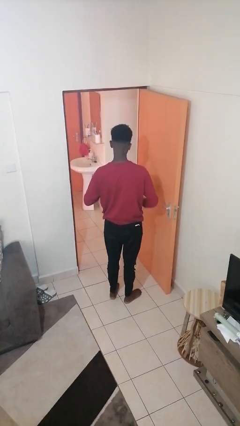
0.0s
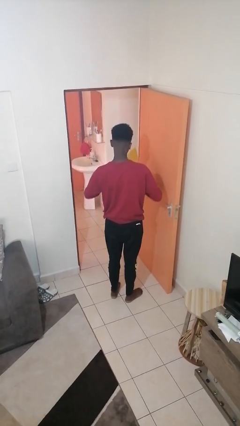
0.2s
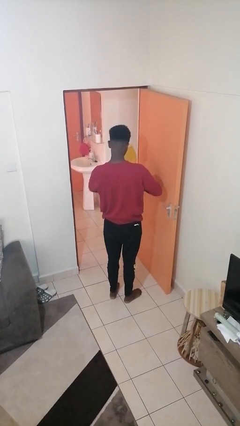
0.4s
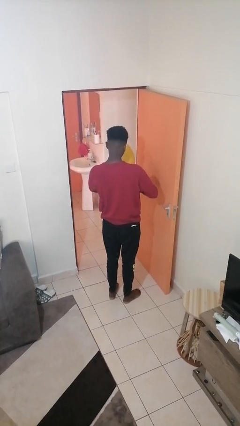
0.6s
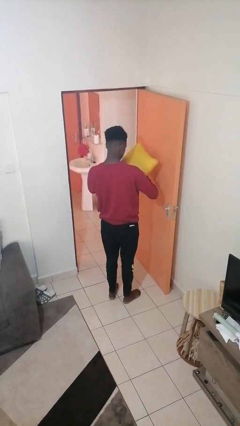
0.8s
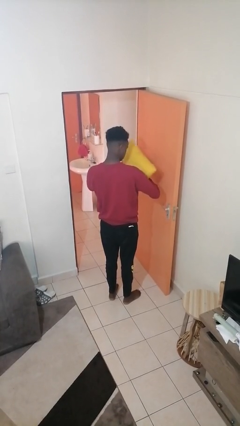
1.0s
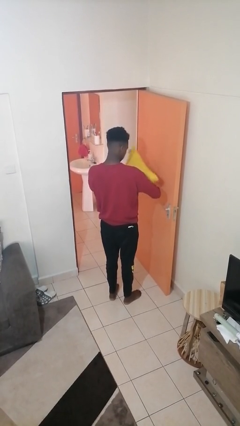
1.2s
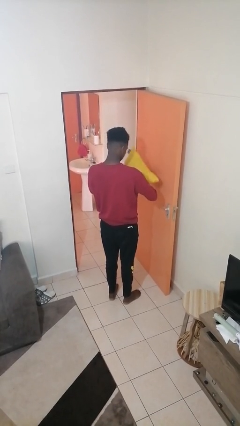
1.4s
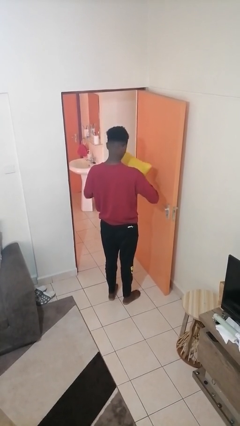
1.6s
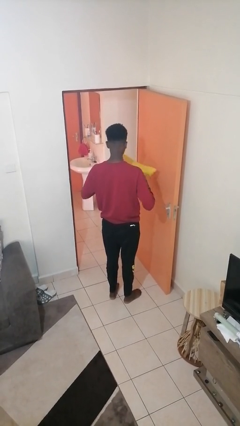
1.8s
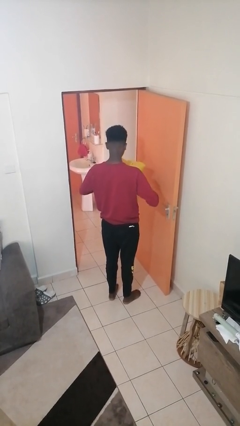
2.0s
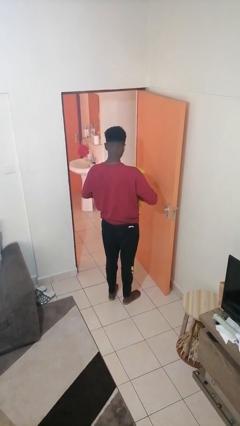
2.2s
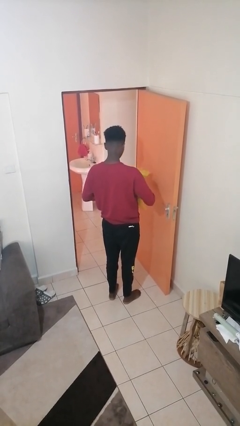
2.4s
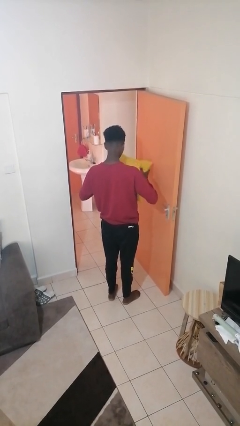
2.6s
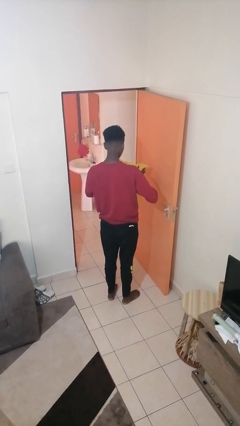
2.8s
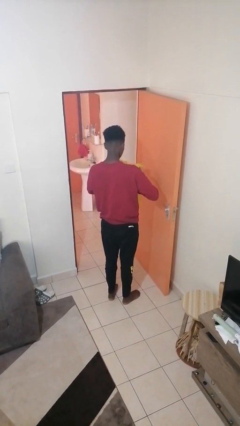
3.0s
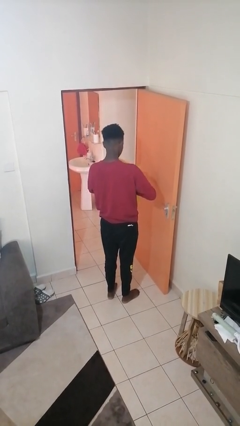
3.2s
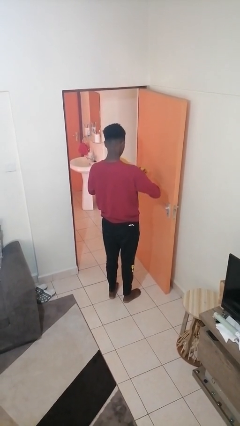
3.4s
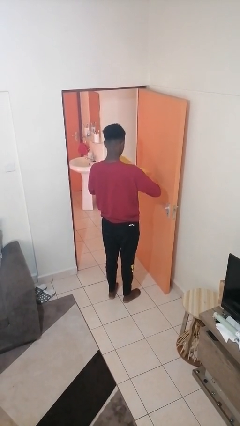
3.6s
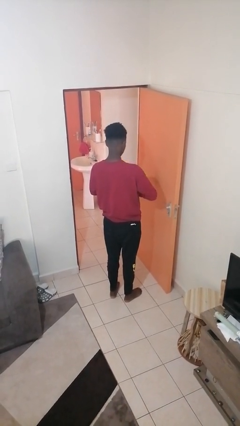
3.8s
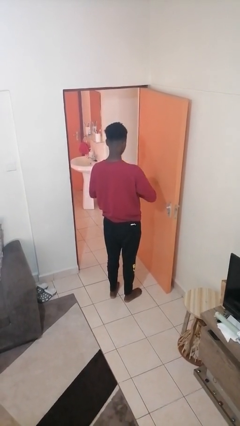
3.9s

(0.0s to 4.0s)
person squeezes object

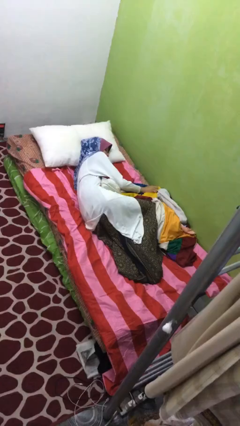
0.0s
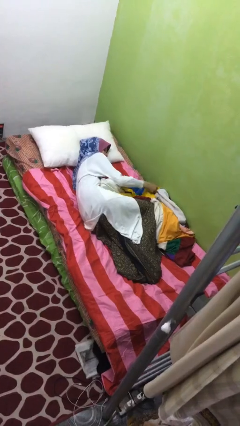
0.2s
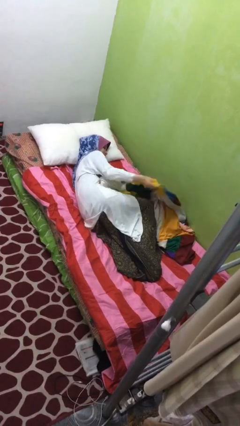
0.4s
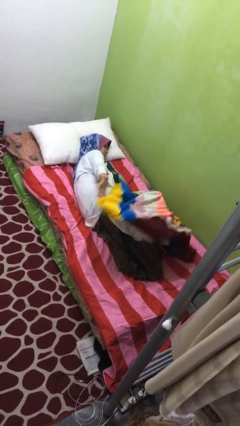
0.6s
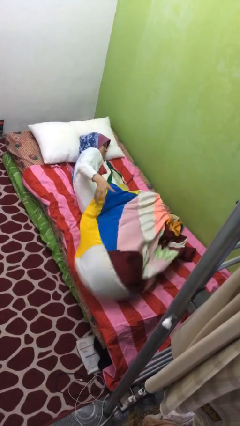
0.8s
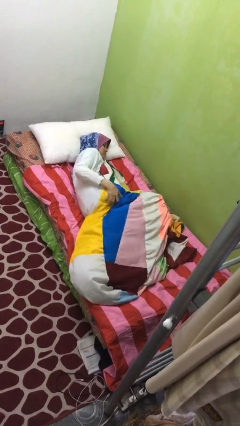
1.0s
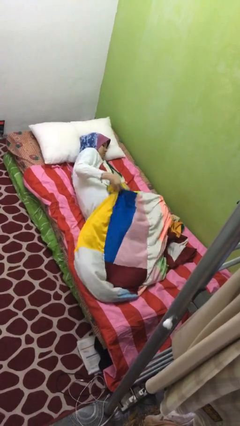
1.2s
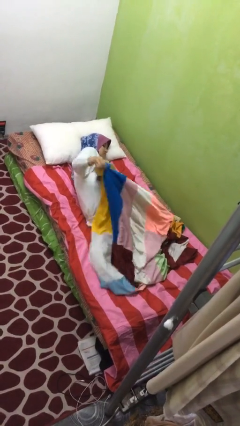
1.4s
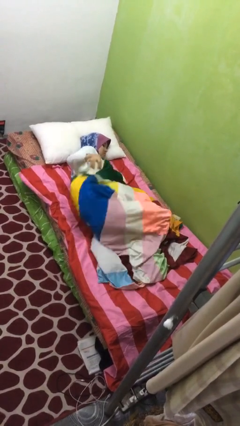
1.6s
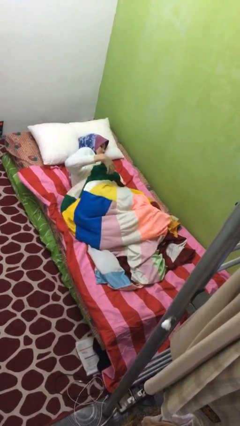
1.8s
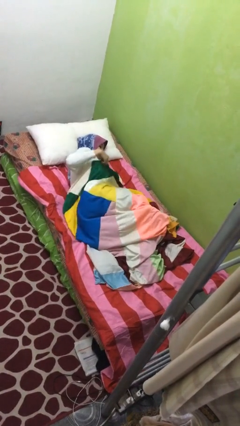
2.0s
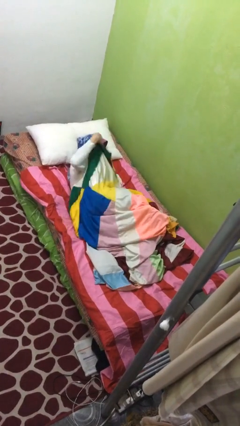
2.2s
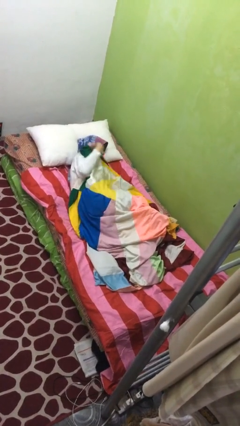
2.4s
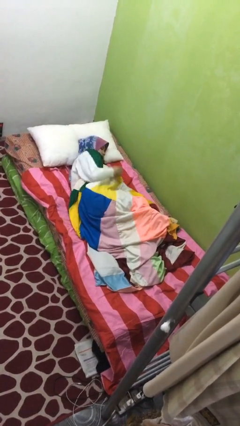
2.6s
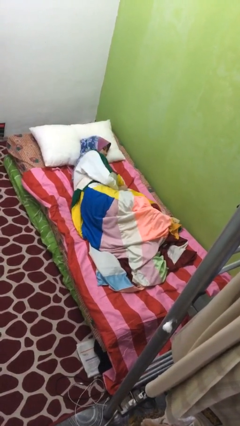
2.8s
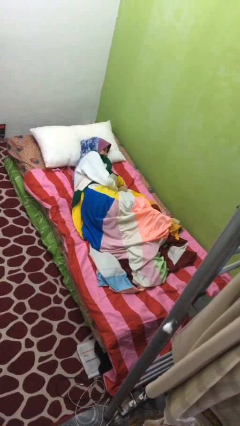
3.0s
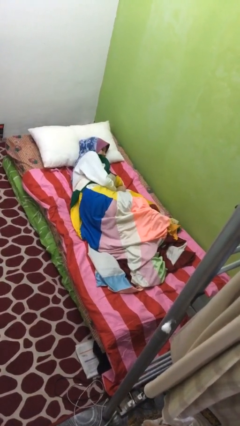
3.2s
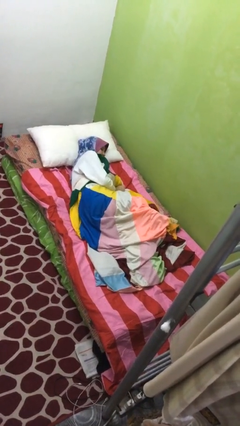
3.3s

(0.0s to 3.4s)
person covers with blanket

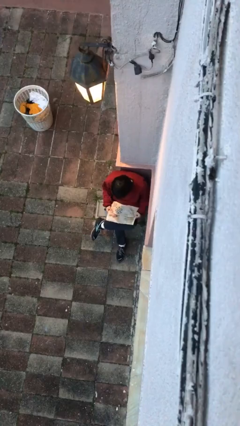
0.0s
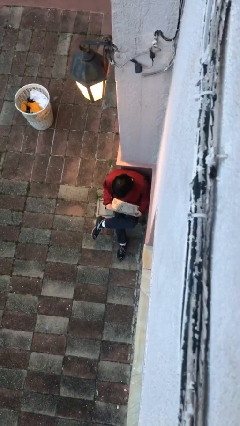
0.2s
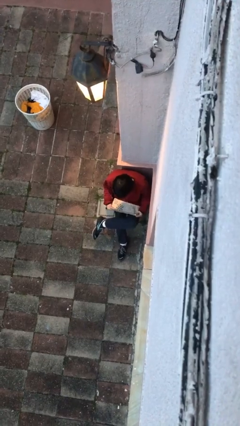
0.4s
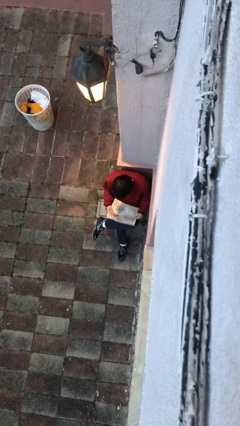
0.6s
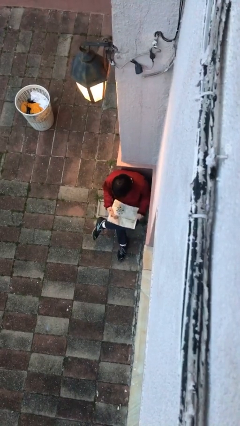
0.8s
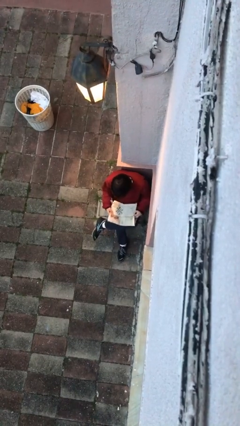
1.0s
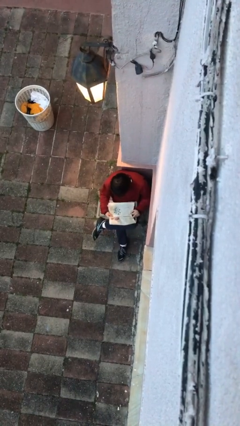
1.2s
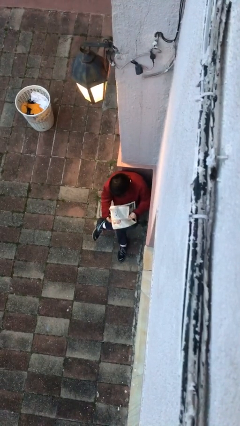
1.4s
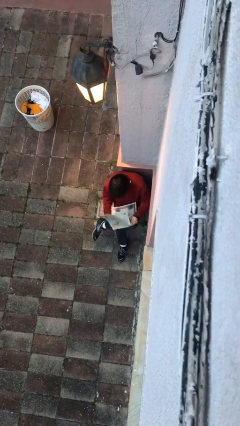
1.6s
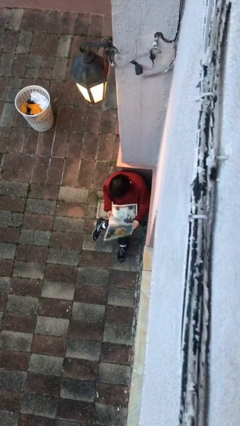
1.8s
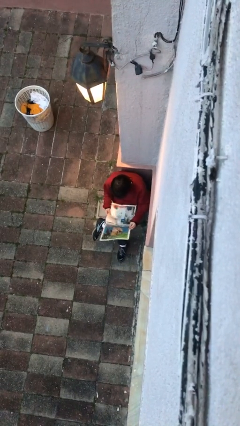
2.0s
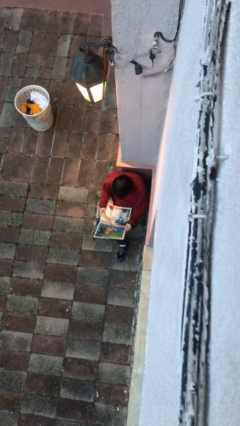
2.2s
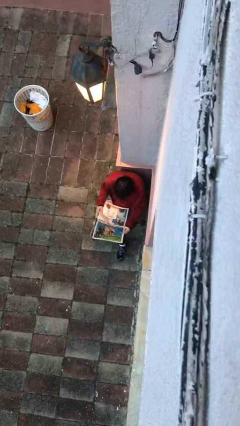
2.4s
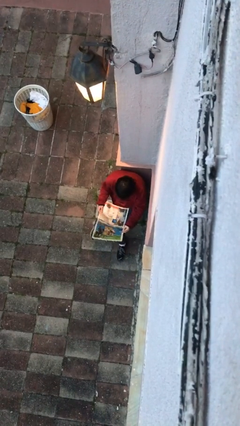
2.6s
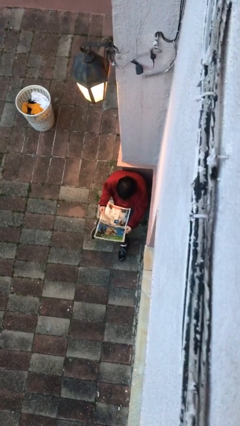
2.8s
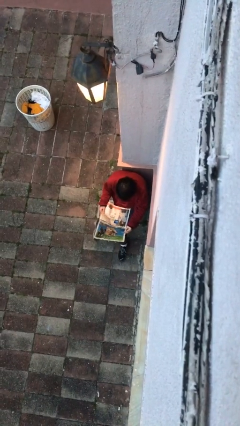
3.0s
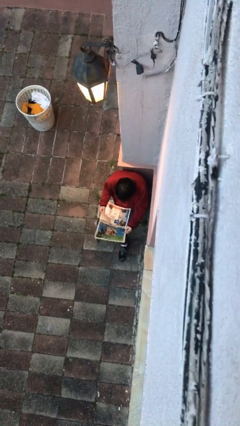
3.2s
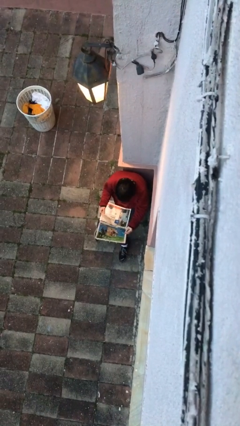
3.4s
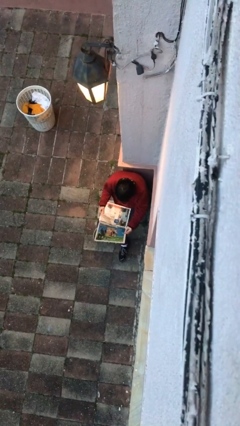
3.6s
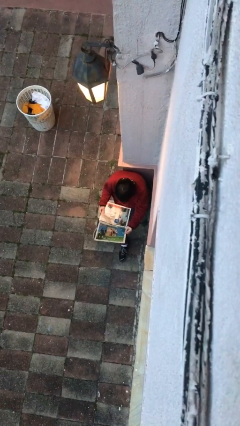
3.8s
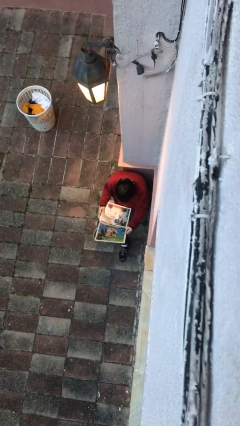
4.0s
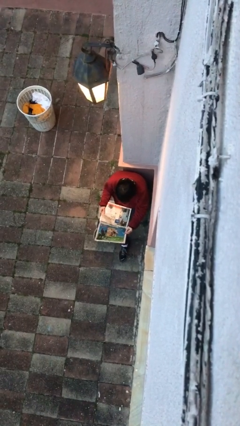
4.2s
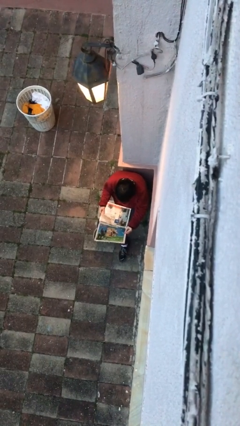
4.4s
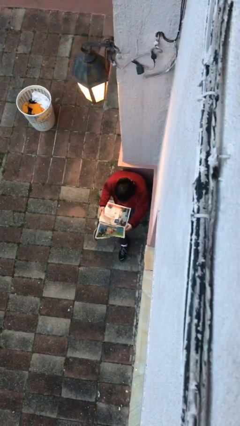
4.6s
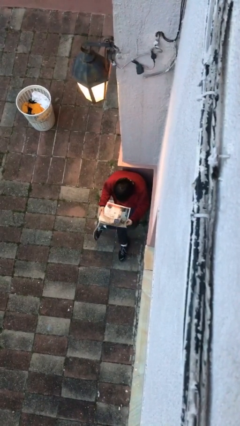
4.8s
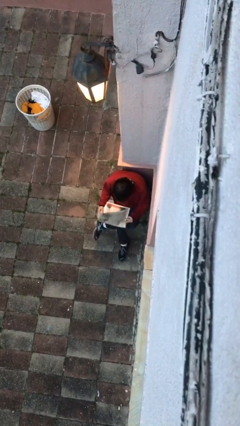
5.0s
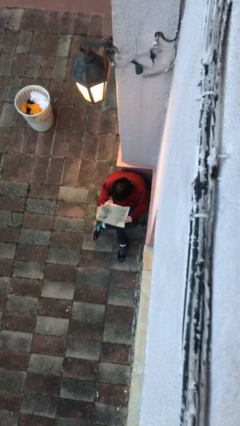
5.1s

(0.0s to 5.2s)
person reads newspaper

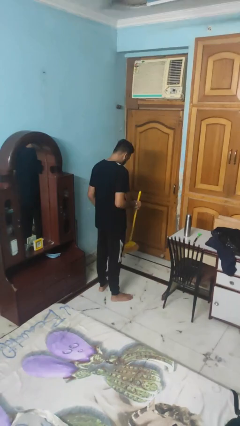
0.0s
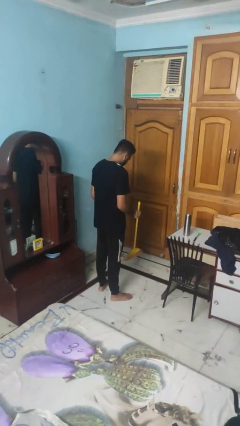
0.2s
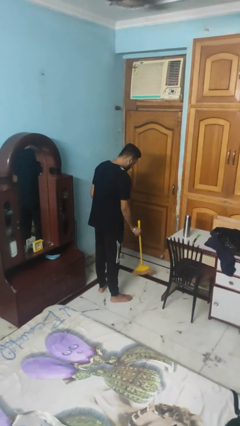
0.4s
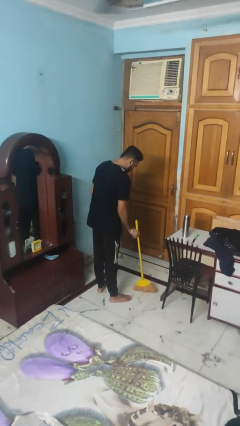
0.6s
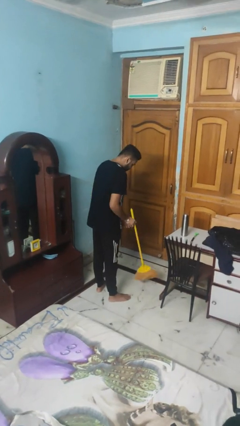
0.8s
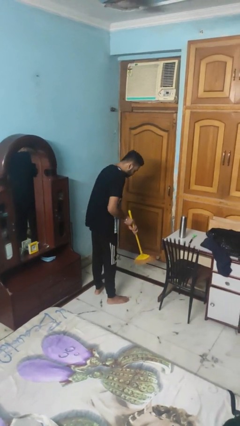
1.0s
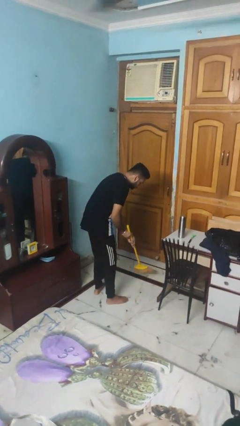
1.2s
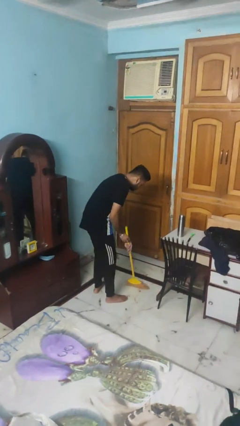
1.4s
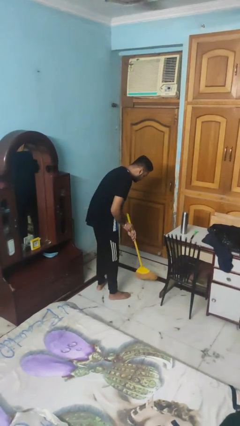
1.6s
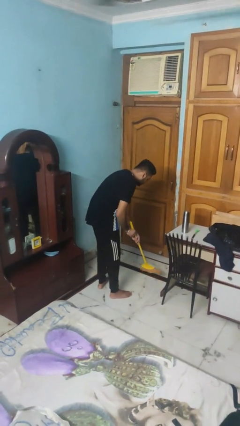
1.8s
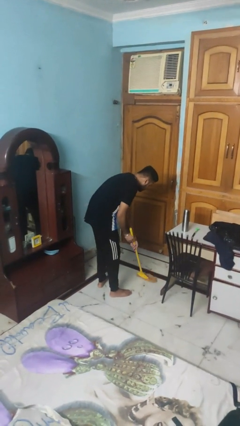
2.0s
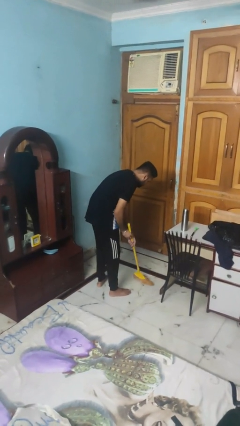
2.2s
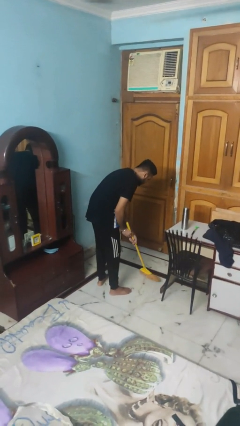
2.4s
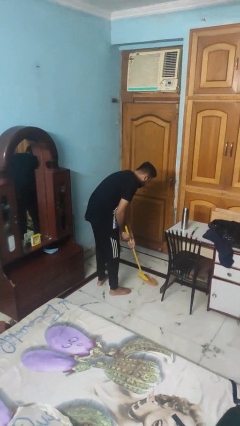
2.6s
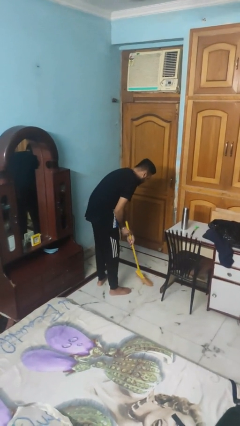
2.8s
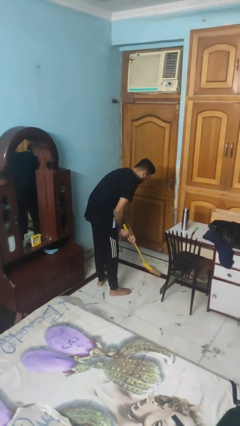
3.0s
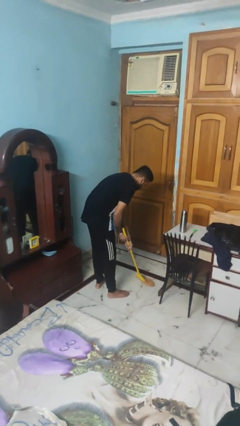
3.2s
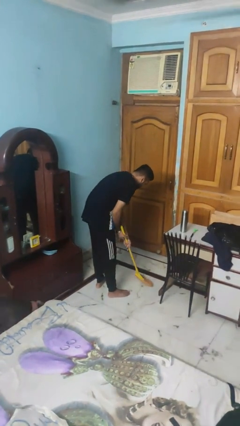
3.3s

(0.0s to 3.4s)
person sweeps floor

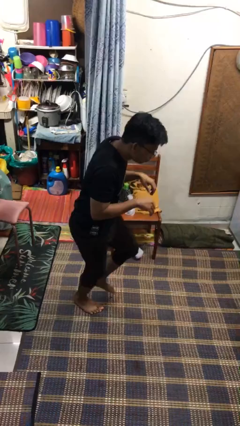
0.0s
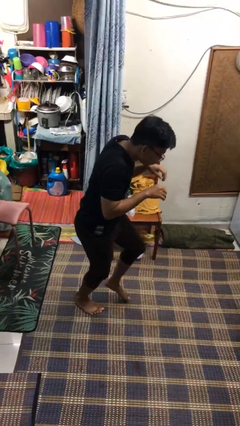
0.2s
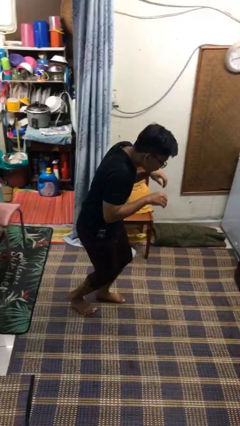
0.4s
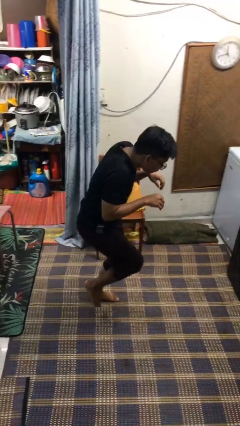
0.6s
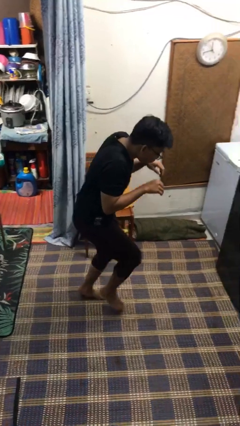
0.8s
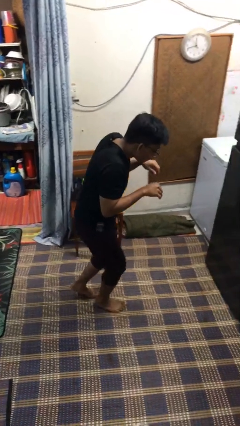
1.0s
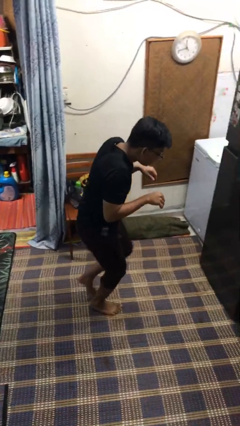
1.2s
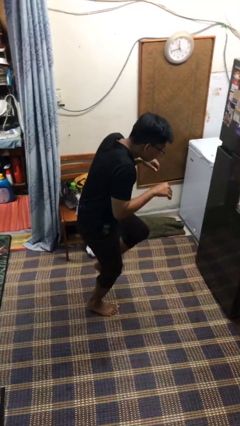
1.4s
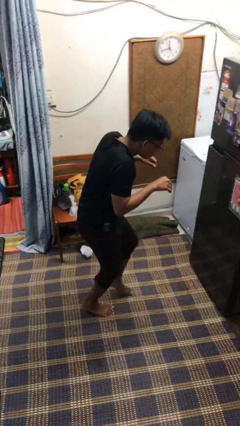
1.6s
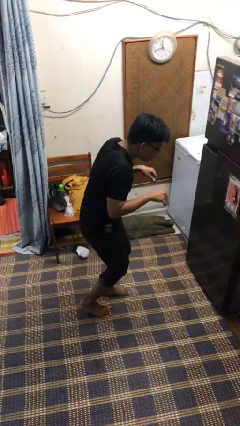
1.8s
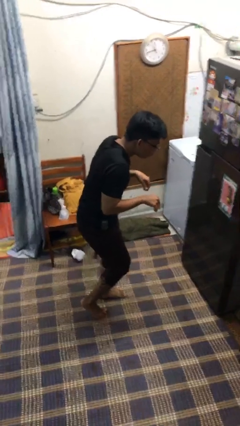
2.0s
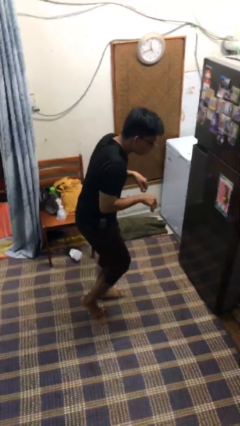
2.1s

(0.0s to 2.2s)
person walks tiptoe
